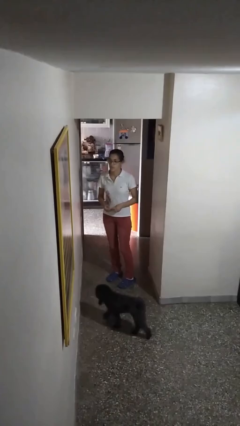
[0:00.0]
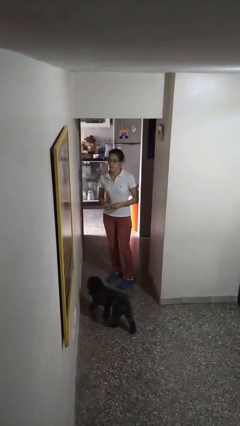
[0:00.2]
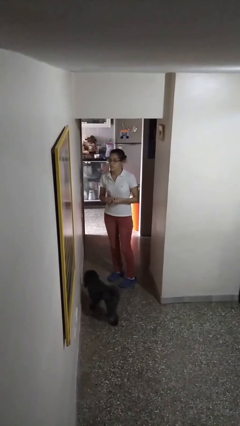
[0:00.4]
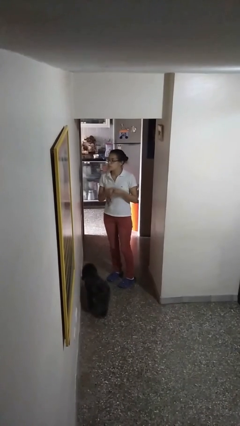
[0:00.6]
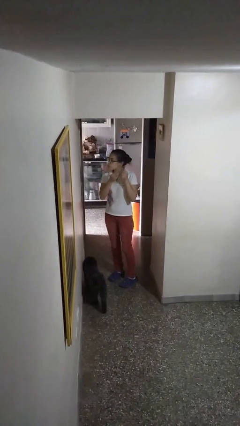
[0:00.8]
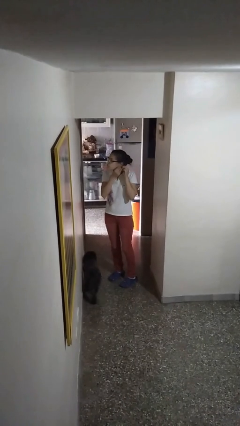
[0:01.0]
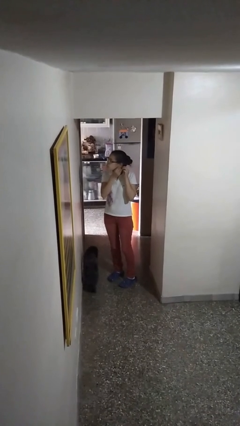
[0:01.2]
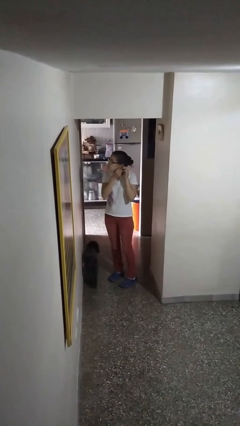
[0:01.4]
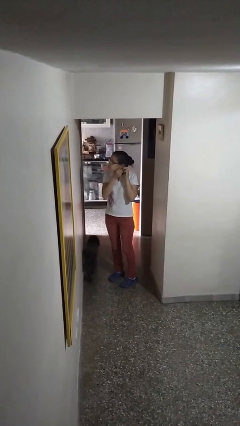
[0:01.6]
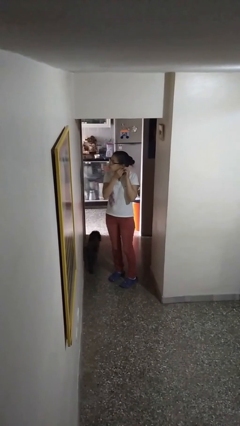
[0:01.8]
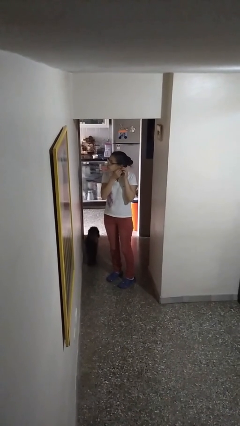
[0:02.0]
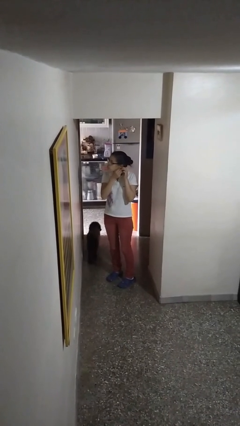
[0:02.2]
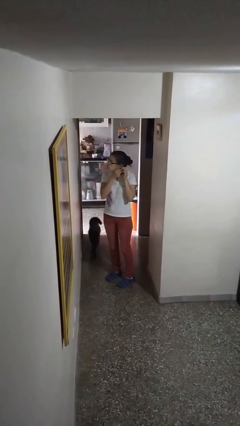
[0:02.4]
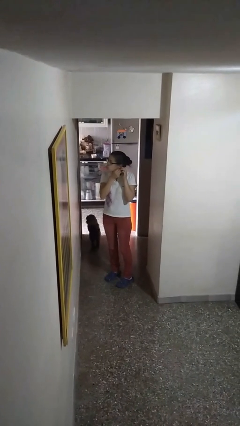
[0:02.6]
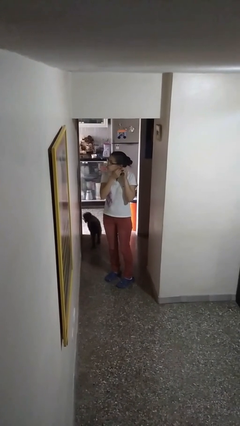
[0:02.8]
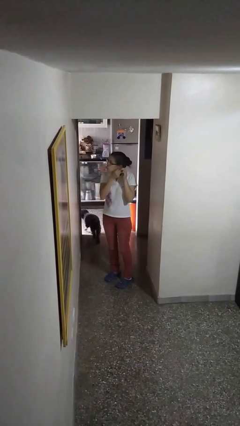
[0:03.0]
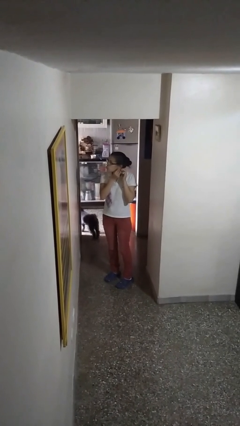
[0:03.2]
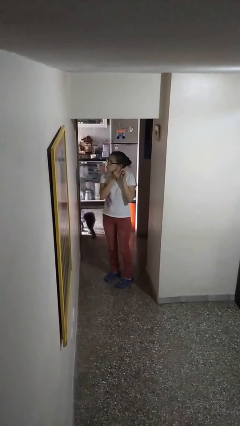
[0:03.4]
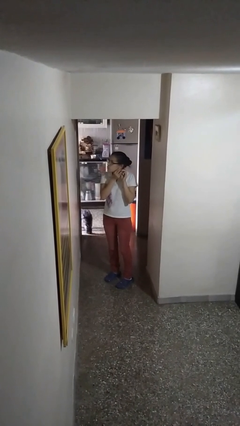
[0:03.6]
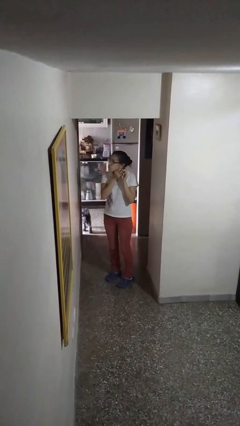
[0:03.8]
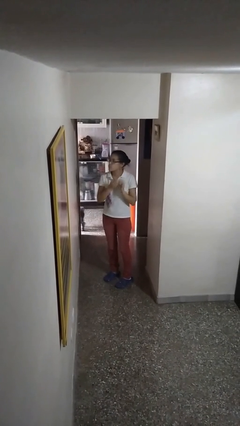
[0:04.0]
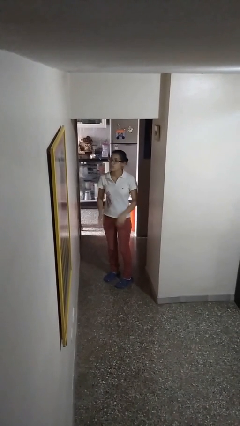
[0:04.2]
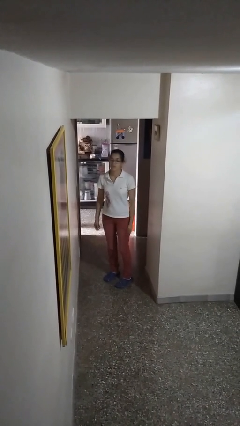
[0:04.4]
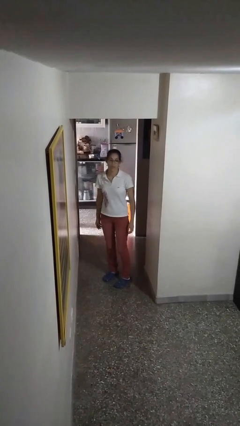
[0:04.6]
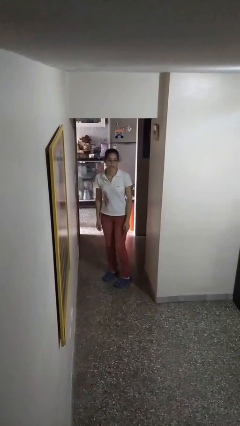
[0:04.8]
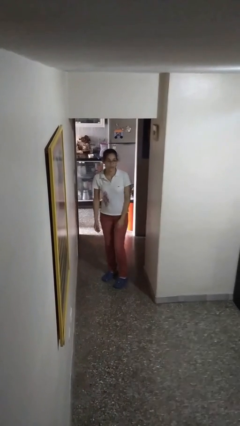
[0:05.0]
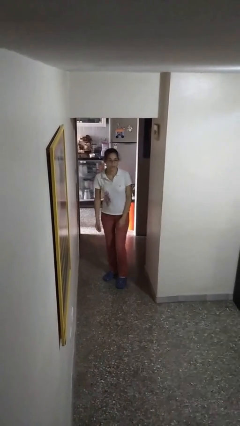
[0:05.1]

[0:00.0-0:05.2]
person puts on earrings

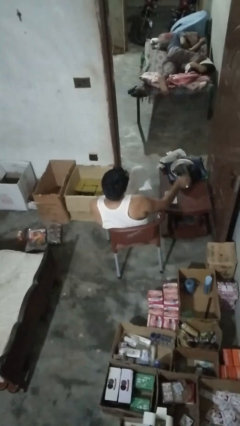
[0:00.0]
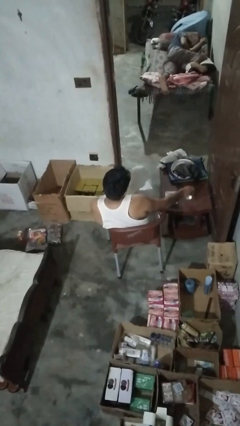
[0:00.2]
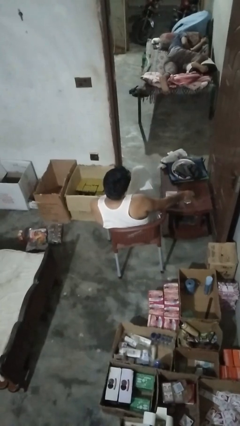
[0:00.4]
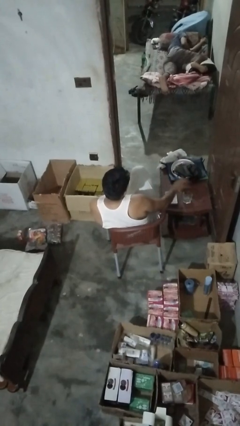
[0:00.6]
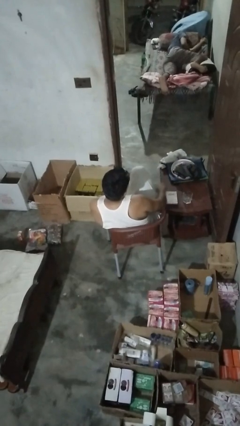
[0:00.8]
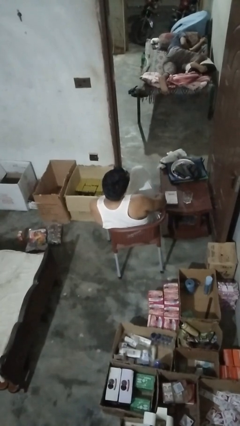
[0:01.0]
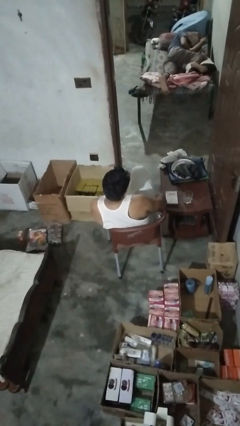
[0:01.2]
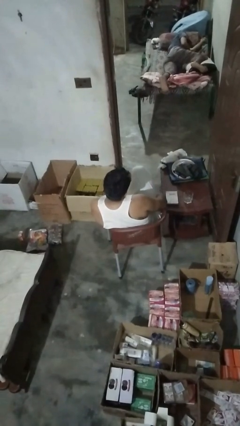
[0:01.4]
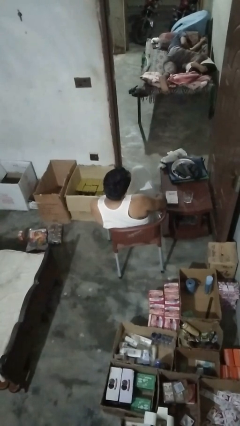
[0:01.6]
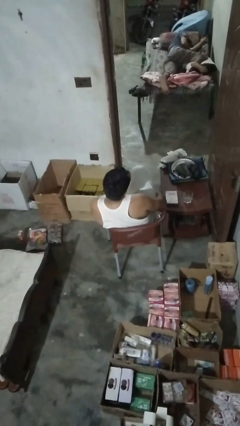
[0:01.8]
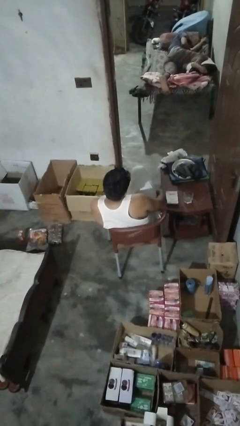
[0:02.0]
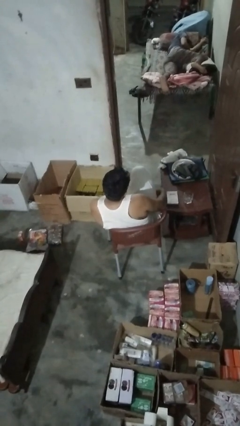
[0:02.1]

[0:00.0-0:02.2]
person sets upright glass

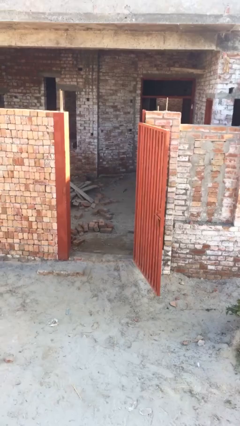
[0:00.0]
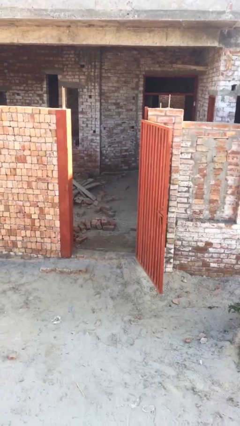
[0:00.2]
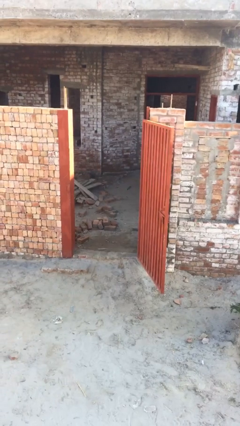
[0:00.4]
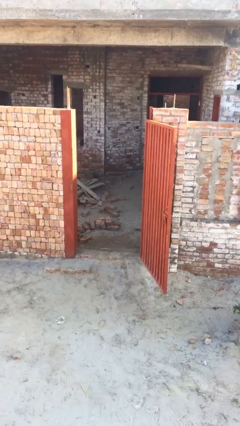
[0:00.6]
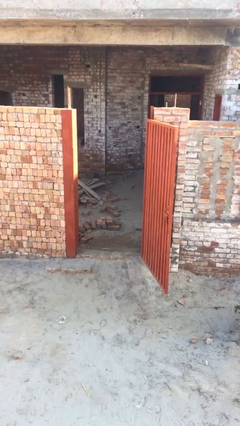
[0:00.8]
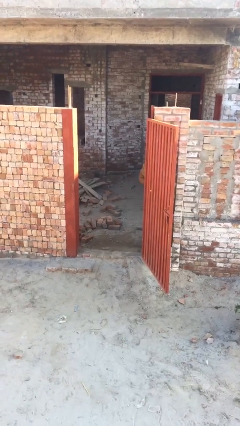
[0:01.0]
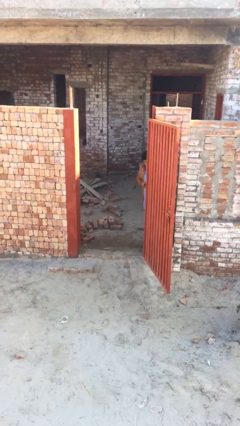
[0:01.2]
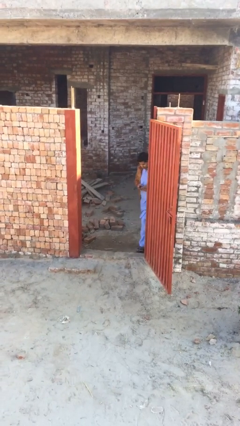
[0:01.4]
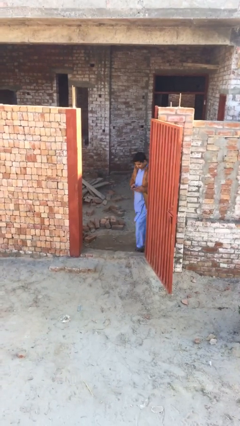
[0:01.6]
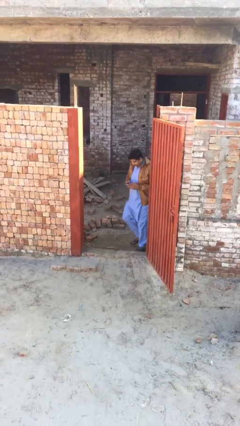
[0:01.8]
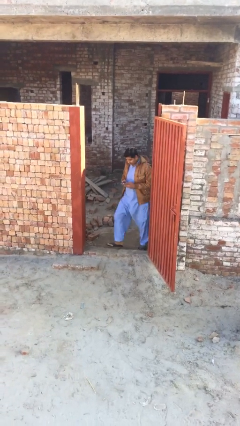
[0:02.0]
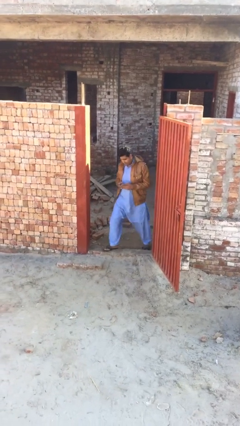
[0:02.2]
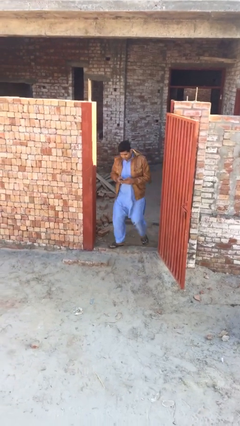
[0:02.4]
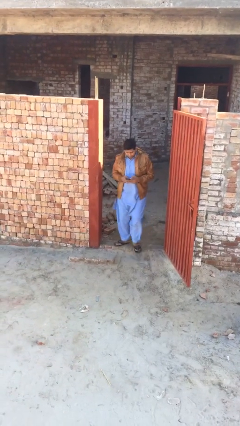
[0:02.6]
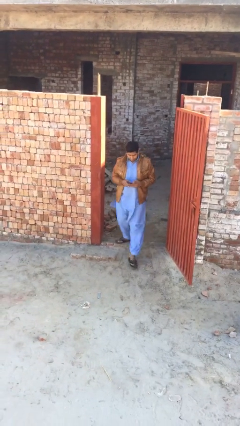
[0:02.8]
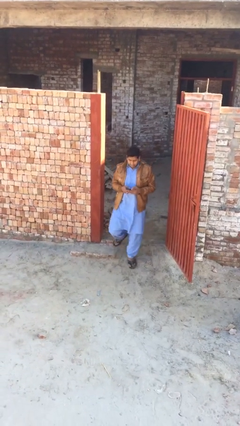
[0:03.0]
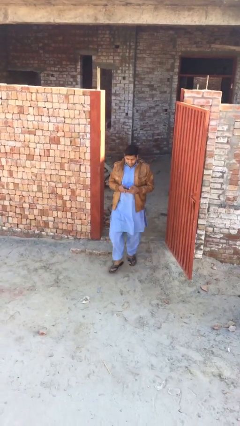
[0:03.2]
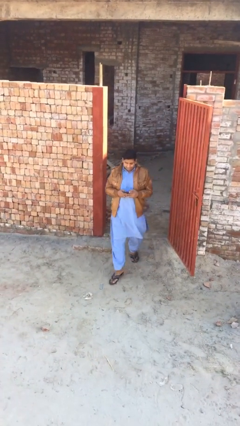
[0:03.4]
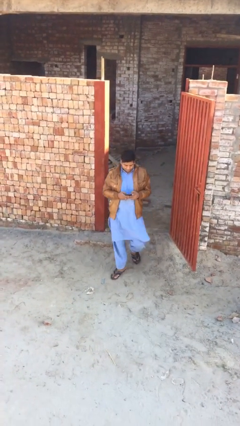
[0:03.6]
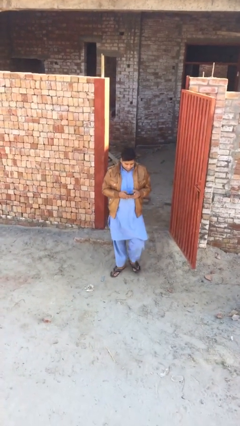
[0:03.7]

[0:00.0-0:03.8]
person enters scene through structure

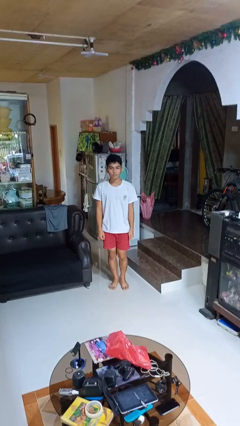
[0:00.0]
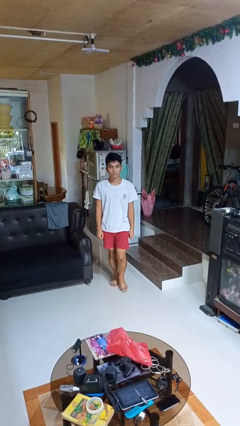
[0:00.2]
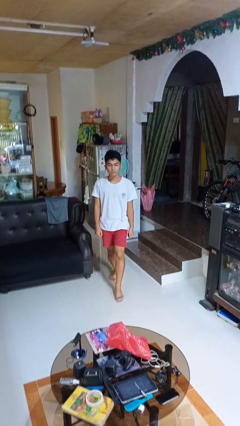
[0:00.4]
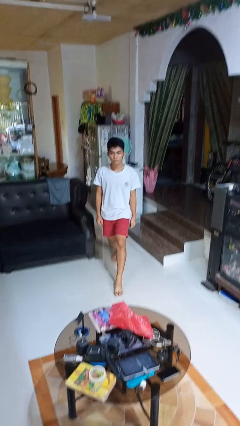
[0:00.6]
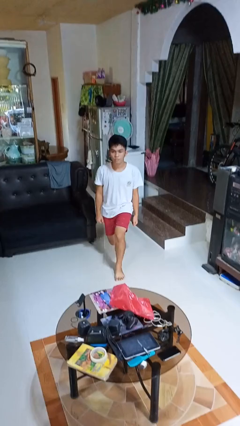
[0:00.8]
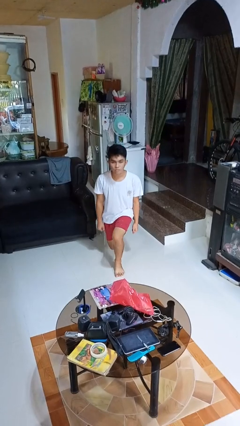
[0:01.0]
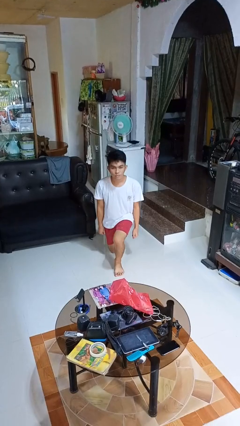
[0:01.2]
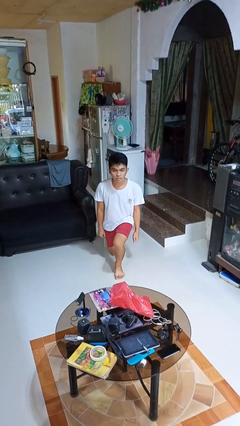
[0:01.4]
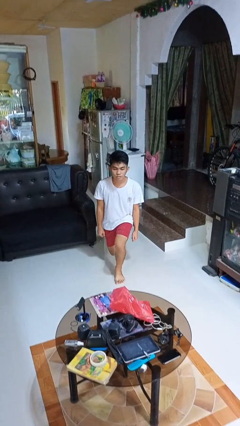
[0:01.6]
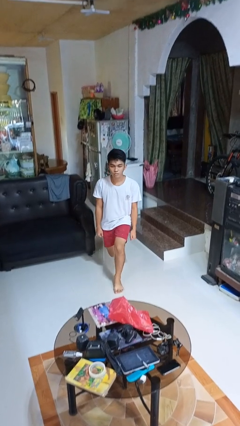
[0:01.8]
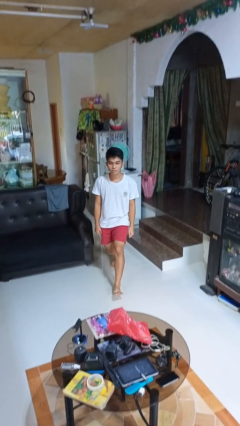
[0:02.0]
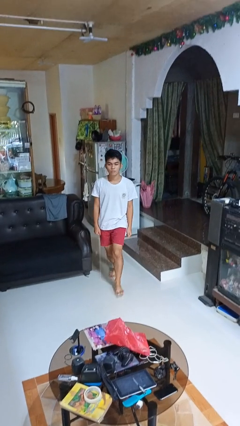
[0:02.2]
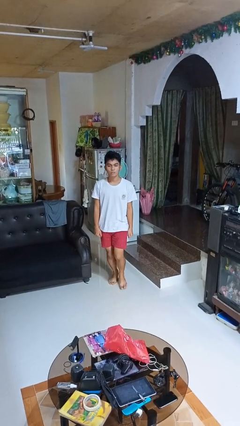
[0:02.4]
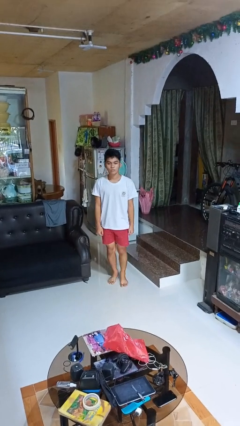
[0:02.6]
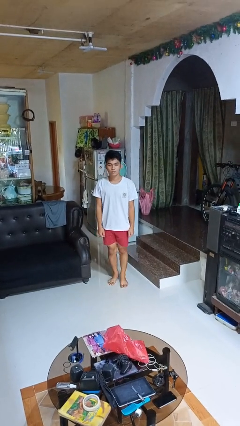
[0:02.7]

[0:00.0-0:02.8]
person exercises with lunges

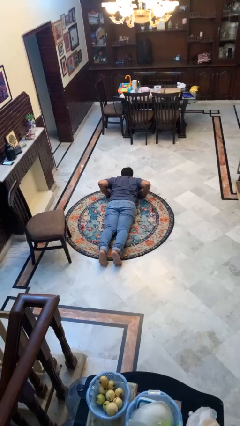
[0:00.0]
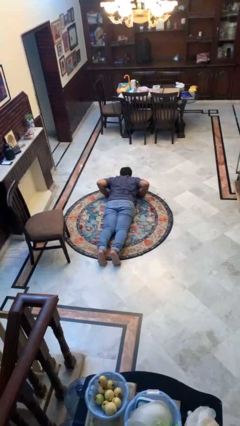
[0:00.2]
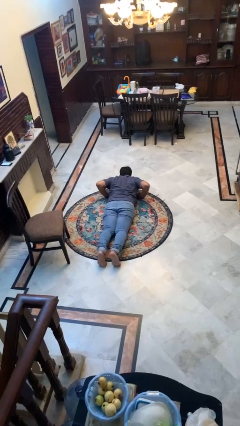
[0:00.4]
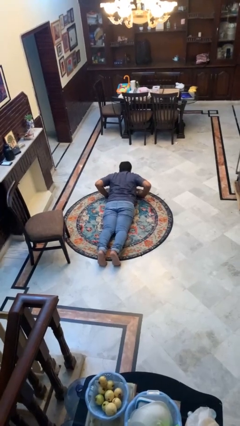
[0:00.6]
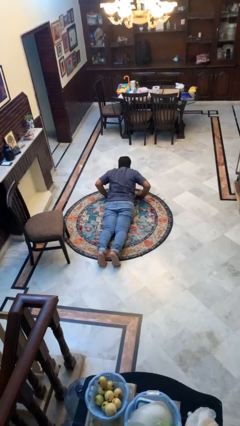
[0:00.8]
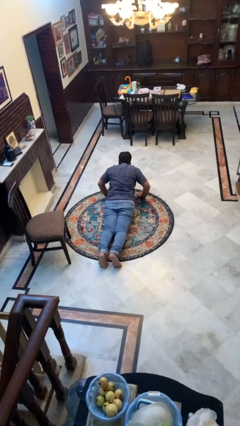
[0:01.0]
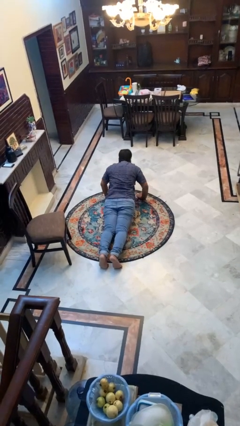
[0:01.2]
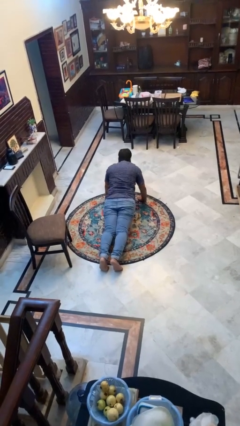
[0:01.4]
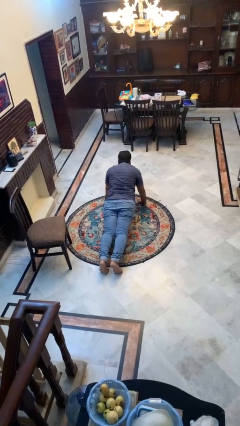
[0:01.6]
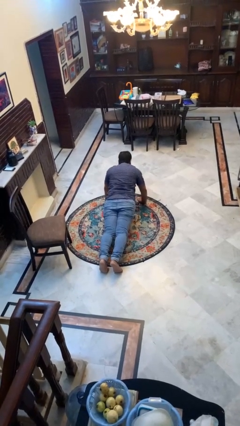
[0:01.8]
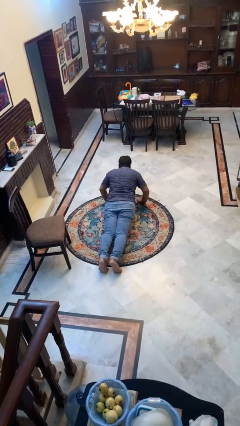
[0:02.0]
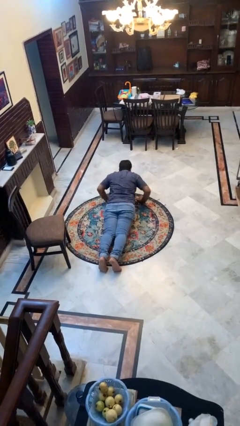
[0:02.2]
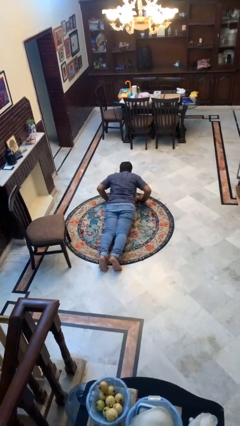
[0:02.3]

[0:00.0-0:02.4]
person exercises with pushup

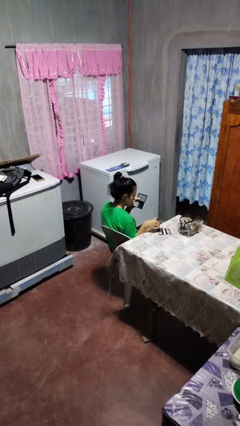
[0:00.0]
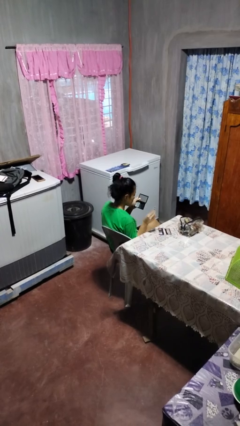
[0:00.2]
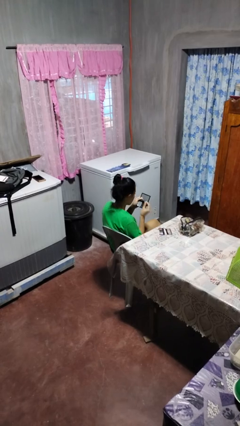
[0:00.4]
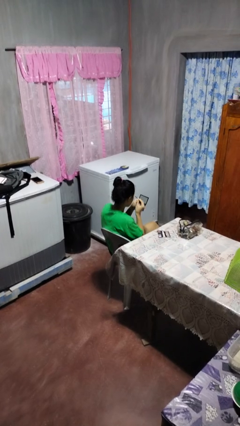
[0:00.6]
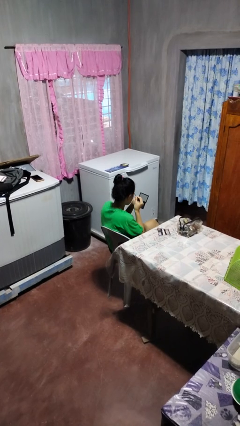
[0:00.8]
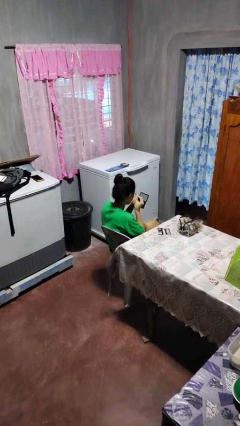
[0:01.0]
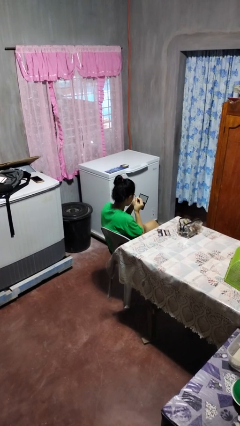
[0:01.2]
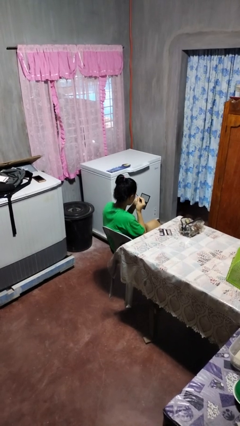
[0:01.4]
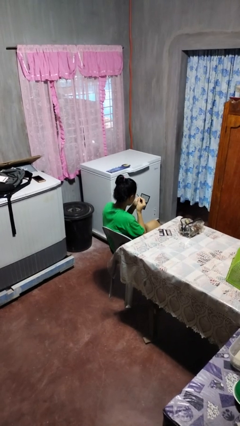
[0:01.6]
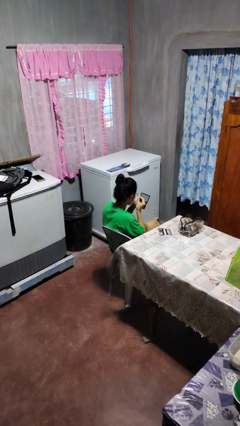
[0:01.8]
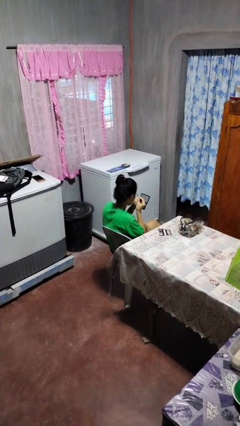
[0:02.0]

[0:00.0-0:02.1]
person applies eye makeup
